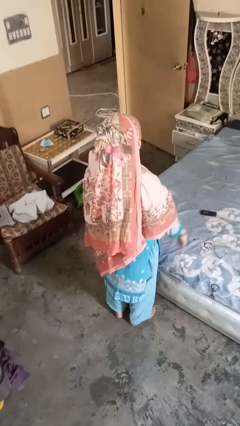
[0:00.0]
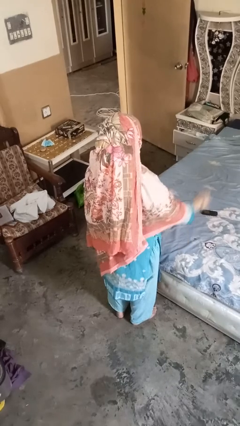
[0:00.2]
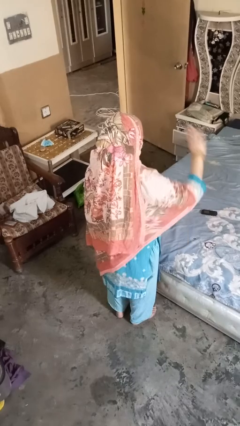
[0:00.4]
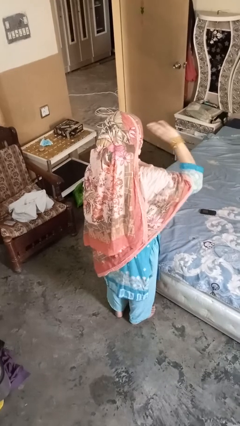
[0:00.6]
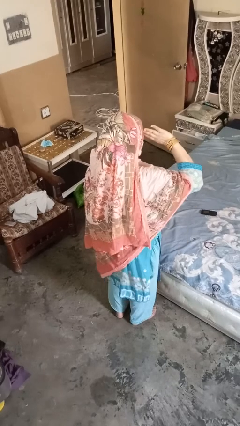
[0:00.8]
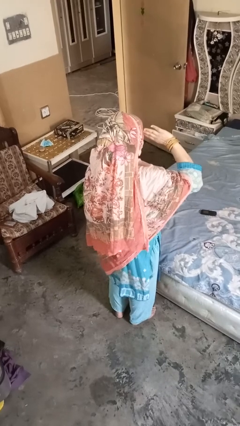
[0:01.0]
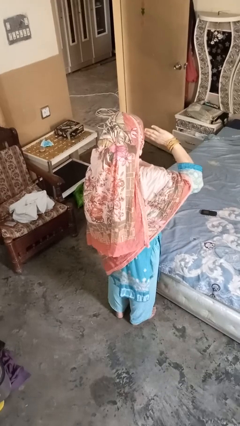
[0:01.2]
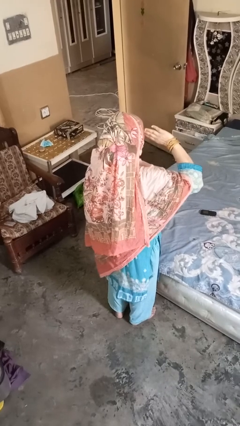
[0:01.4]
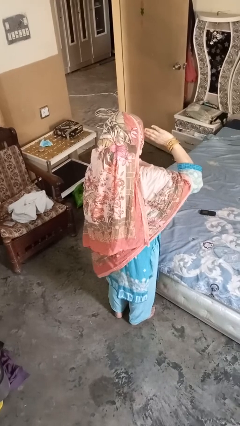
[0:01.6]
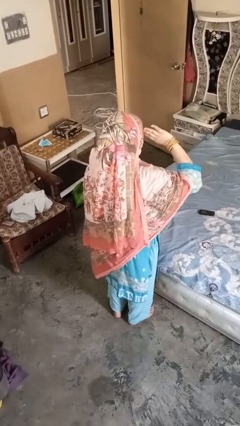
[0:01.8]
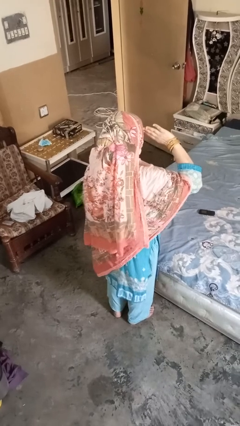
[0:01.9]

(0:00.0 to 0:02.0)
person salutes

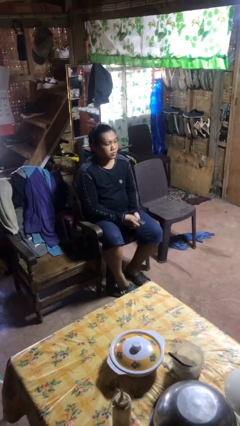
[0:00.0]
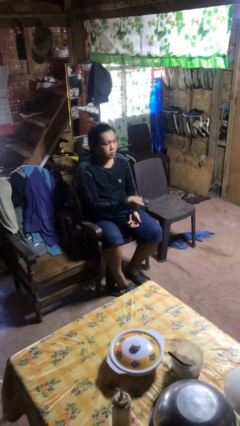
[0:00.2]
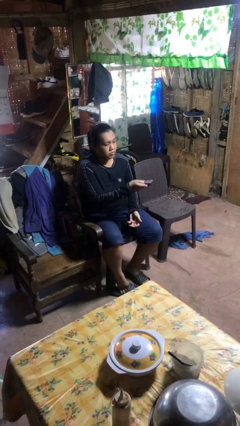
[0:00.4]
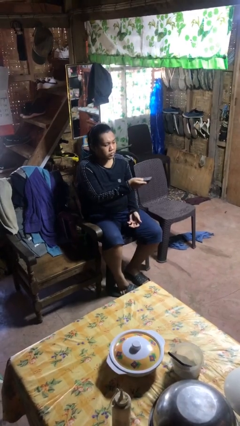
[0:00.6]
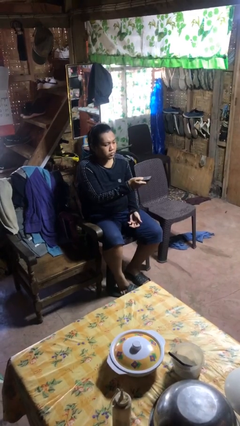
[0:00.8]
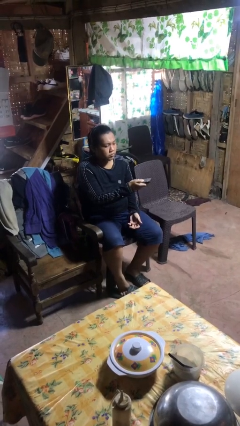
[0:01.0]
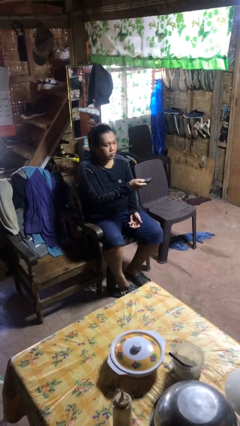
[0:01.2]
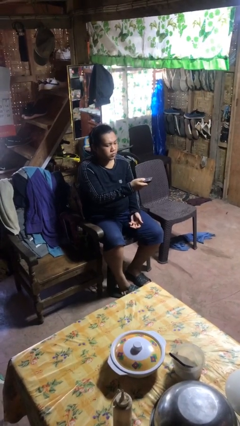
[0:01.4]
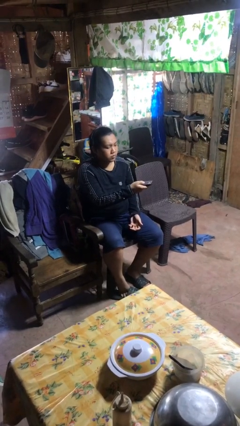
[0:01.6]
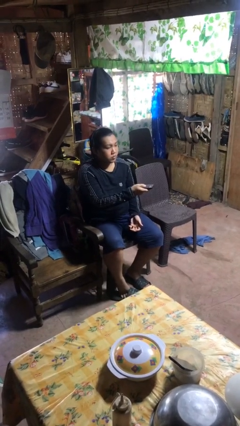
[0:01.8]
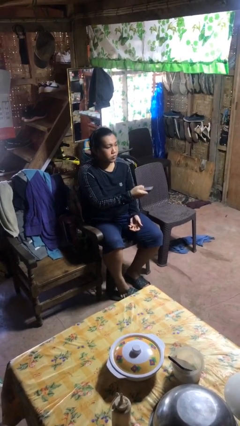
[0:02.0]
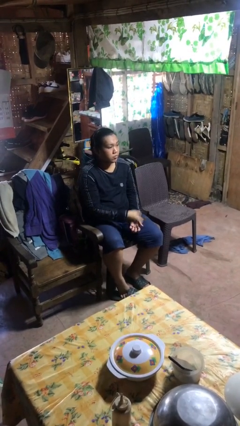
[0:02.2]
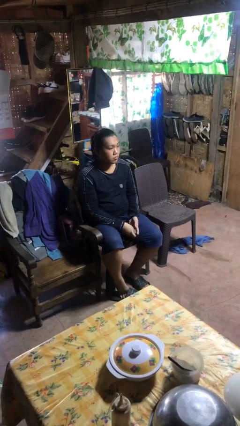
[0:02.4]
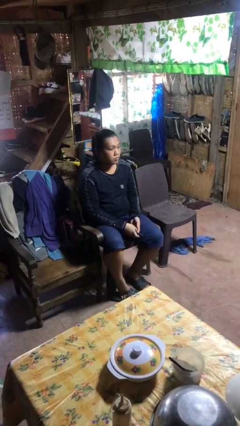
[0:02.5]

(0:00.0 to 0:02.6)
person uses television remote

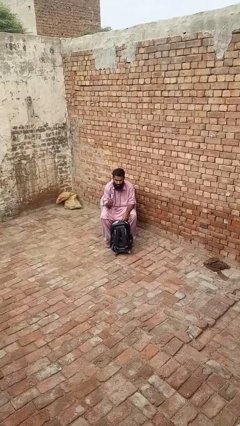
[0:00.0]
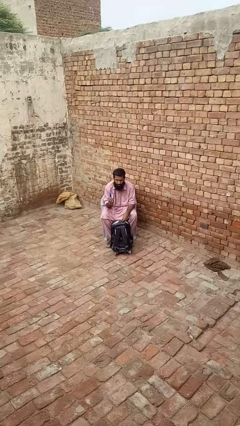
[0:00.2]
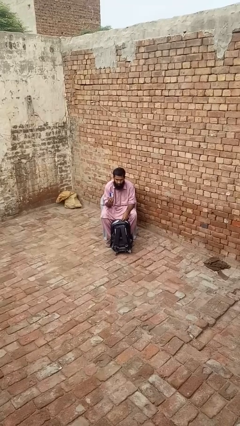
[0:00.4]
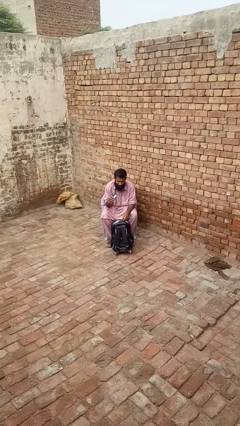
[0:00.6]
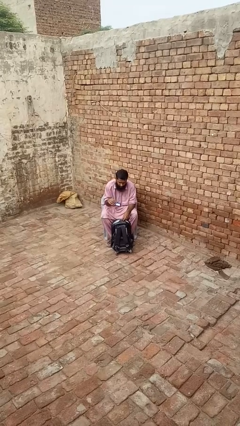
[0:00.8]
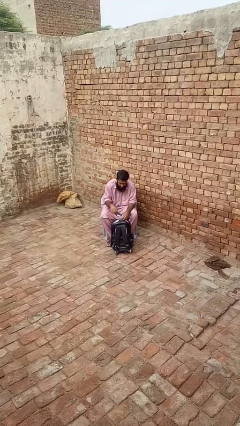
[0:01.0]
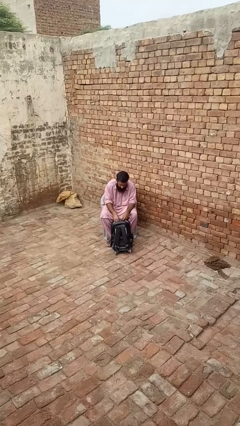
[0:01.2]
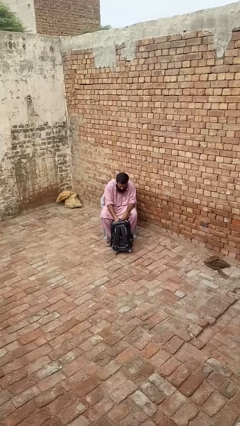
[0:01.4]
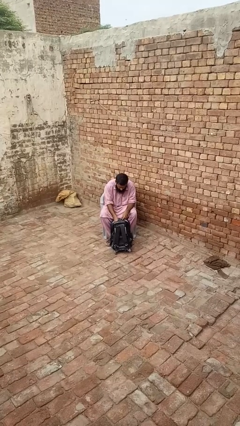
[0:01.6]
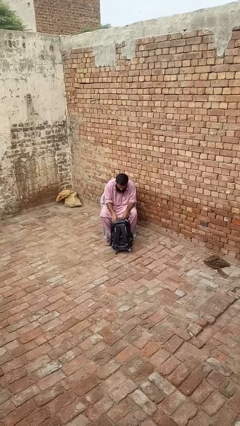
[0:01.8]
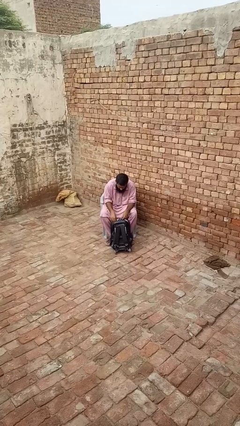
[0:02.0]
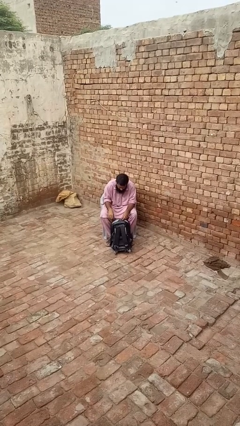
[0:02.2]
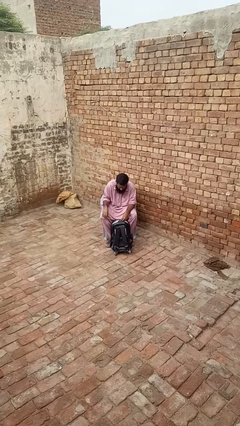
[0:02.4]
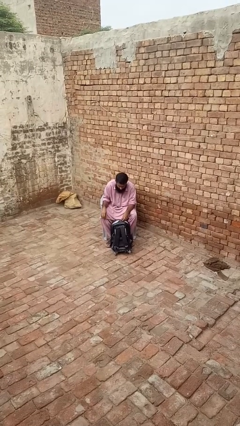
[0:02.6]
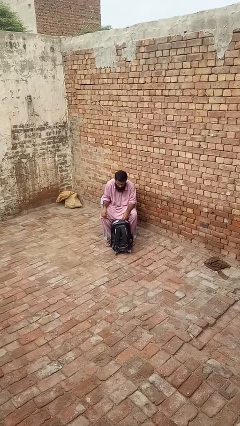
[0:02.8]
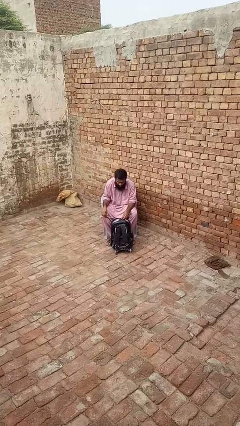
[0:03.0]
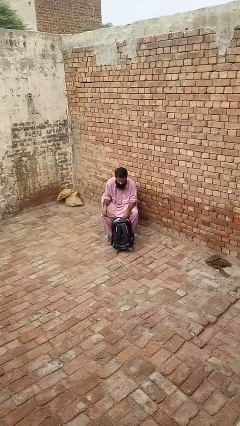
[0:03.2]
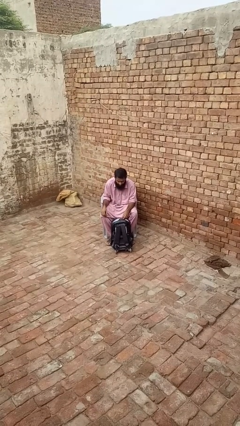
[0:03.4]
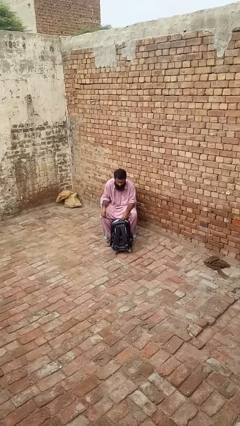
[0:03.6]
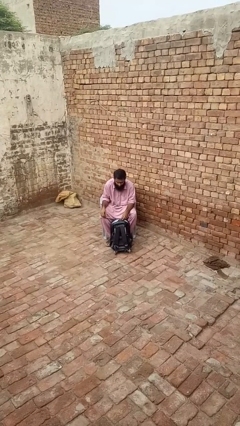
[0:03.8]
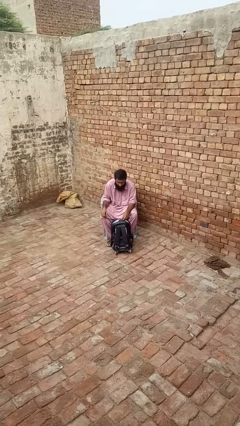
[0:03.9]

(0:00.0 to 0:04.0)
person puts object into backpack

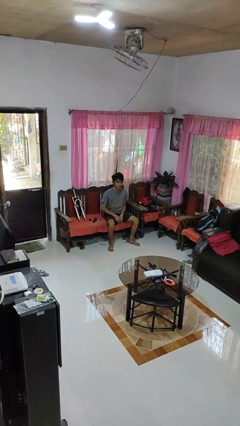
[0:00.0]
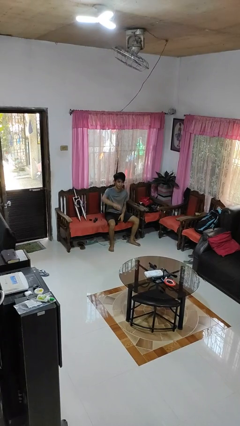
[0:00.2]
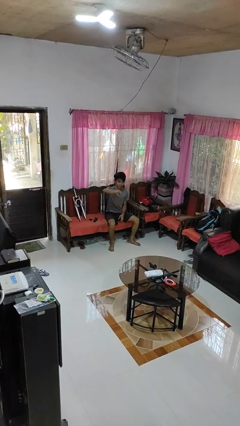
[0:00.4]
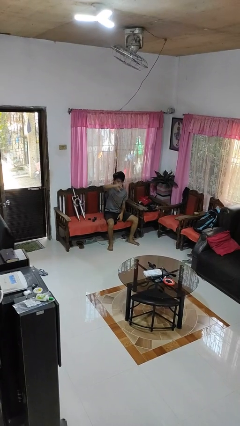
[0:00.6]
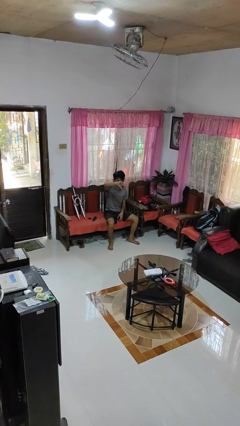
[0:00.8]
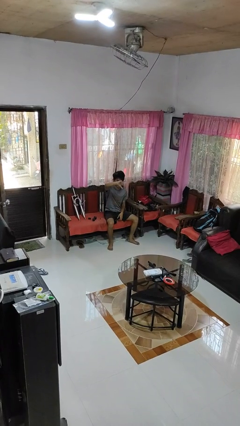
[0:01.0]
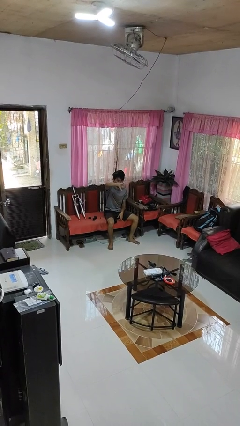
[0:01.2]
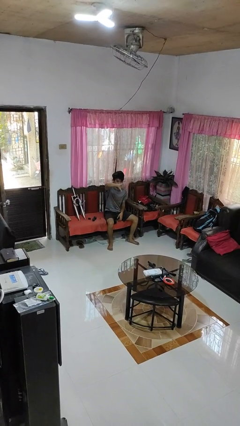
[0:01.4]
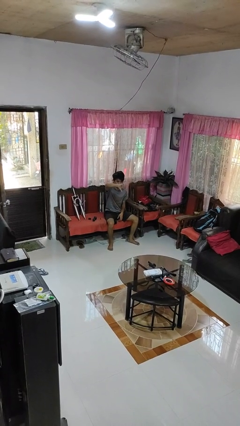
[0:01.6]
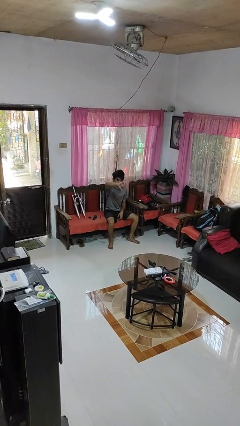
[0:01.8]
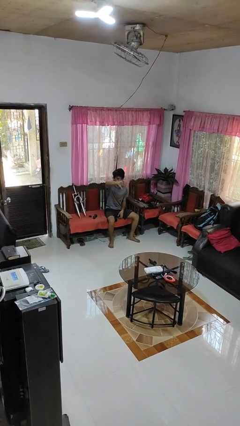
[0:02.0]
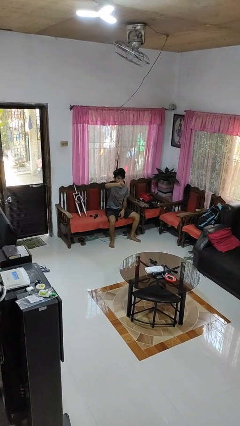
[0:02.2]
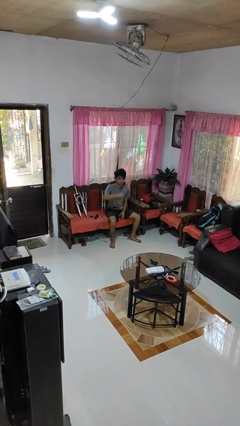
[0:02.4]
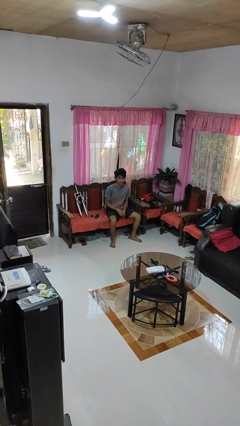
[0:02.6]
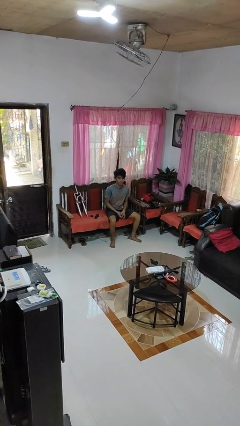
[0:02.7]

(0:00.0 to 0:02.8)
person gestures thumbs down

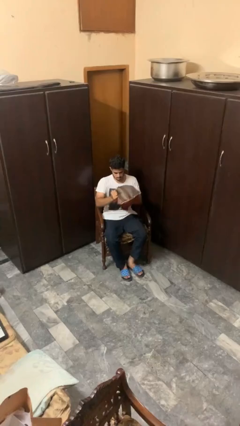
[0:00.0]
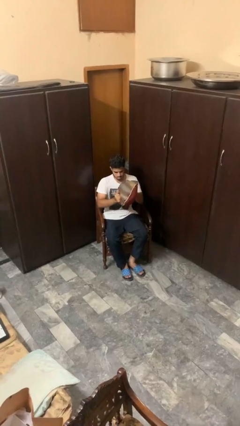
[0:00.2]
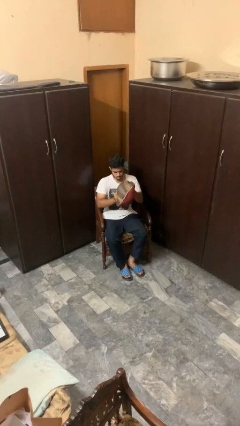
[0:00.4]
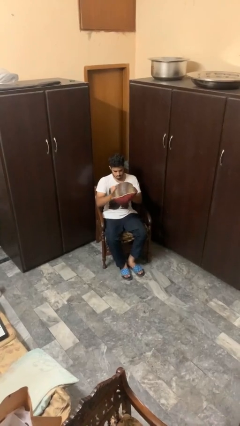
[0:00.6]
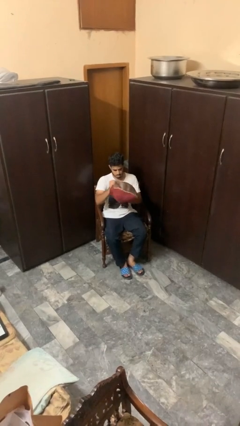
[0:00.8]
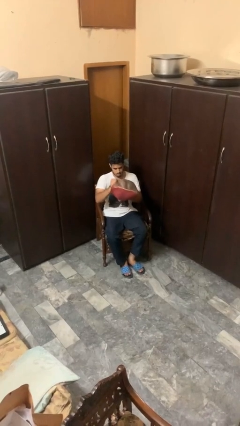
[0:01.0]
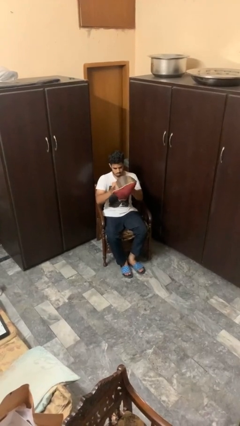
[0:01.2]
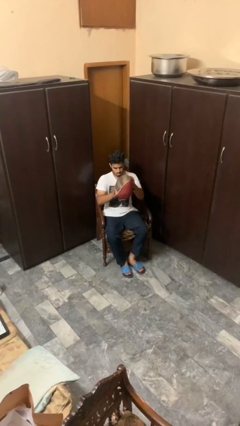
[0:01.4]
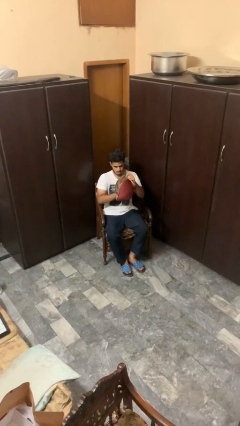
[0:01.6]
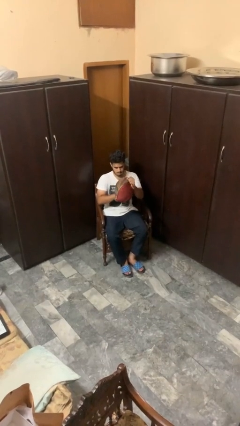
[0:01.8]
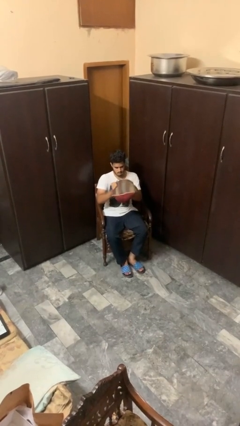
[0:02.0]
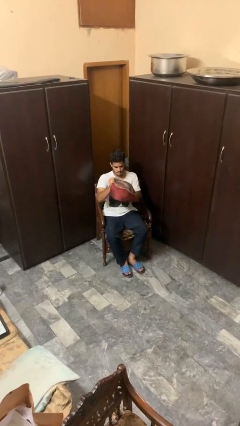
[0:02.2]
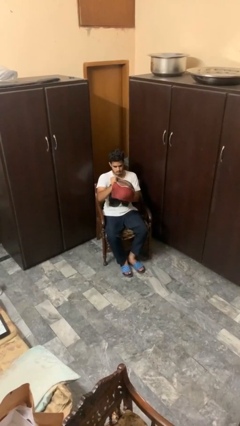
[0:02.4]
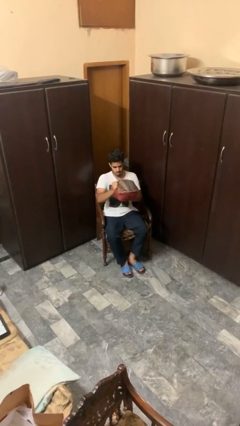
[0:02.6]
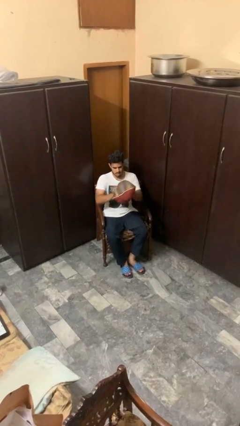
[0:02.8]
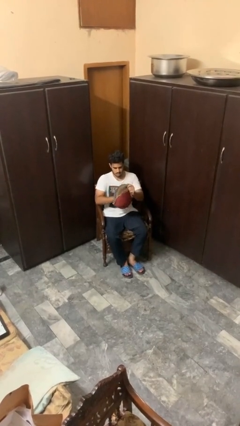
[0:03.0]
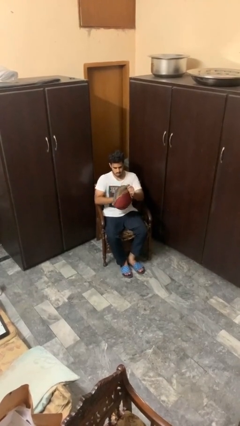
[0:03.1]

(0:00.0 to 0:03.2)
person squeezes object

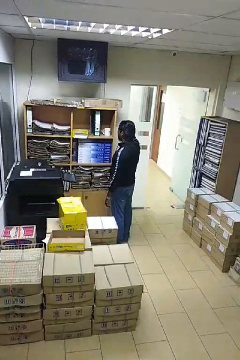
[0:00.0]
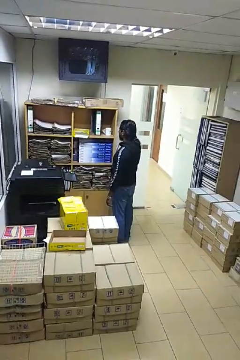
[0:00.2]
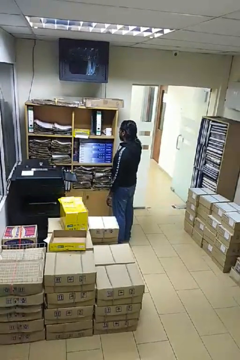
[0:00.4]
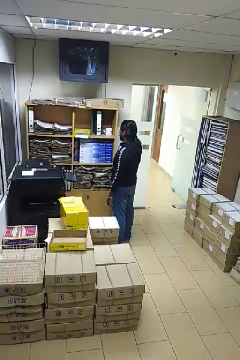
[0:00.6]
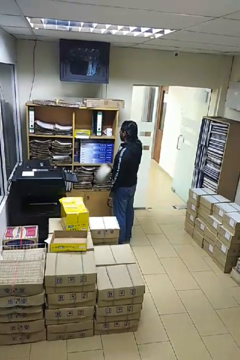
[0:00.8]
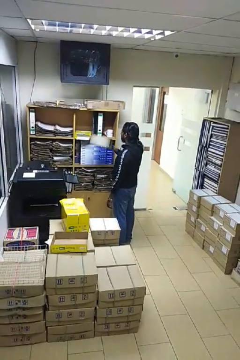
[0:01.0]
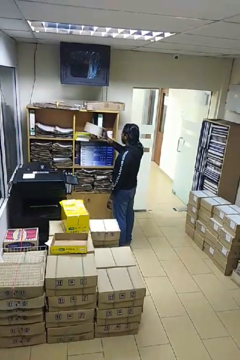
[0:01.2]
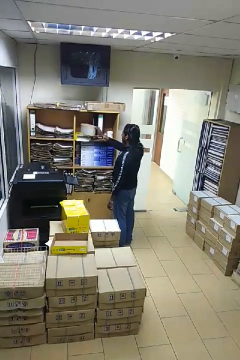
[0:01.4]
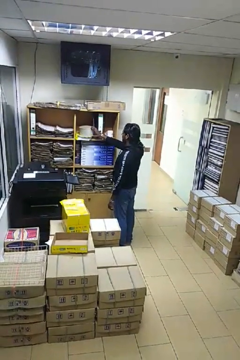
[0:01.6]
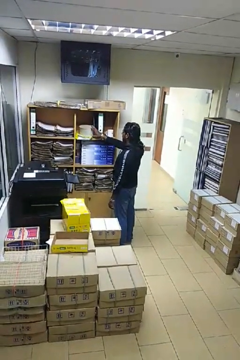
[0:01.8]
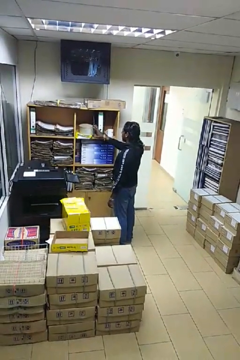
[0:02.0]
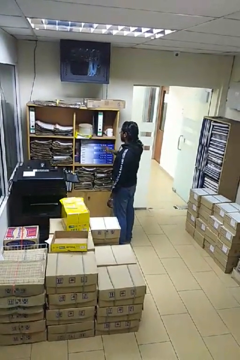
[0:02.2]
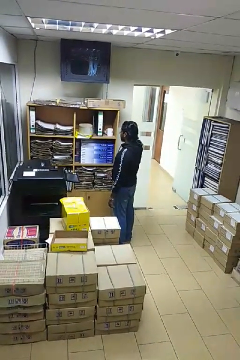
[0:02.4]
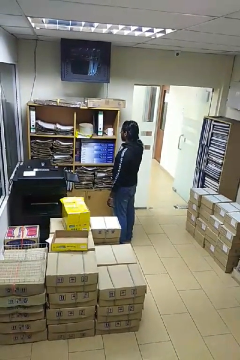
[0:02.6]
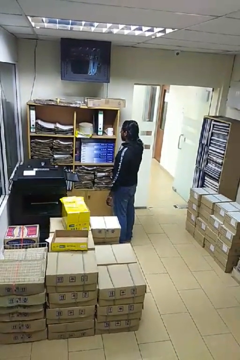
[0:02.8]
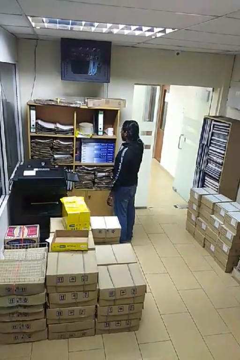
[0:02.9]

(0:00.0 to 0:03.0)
person puts down object into cabinet

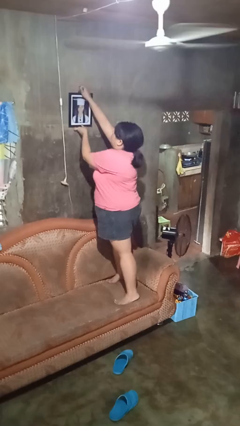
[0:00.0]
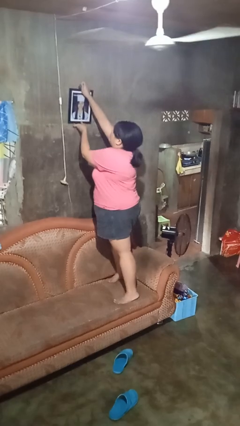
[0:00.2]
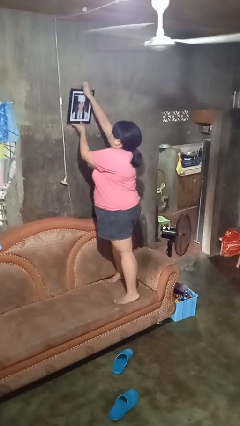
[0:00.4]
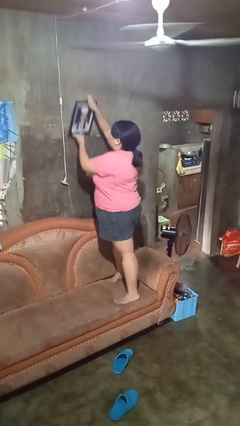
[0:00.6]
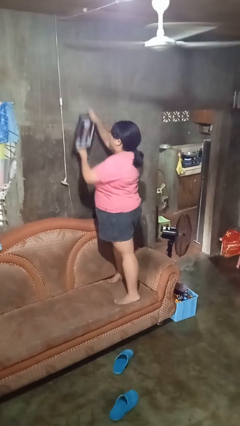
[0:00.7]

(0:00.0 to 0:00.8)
person takes down picture frame
